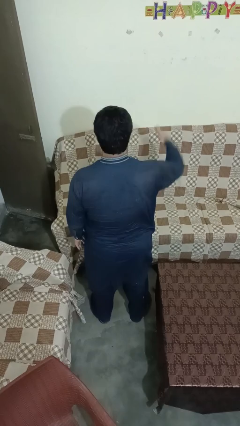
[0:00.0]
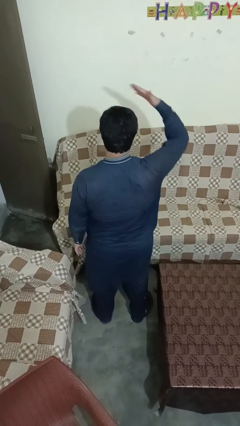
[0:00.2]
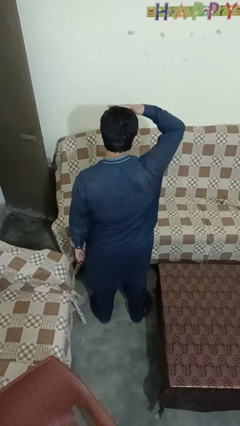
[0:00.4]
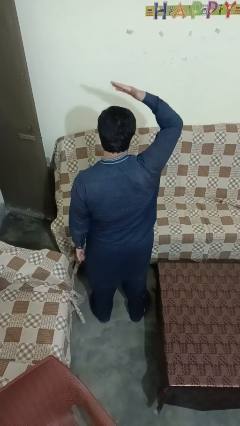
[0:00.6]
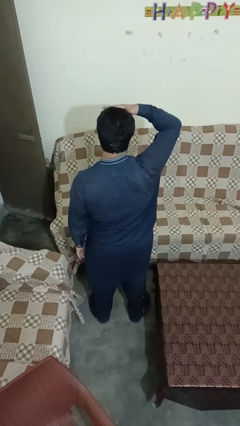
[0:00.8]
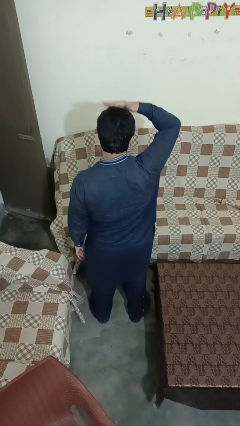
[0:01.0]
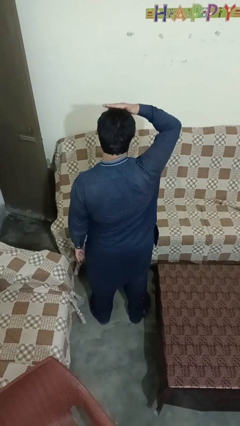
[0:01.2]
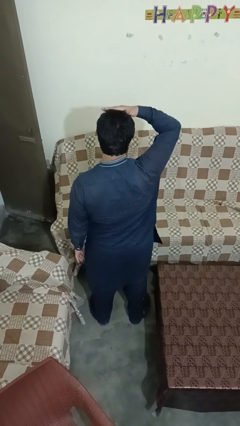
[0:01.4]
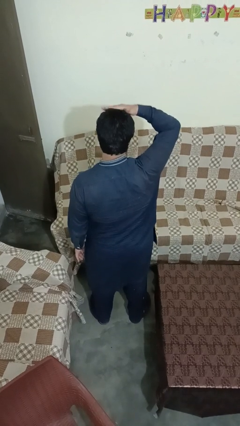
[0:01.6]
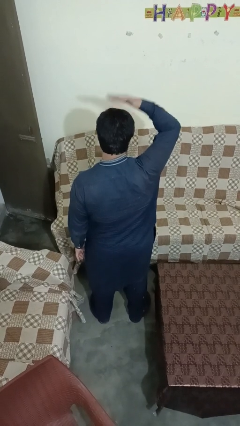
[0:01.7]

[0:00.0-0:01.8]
person pats head

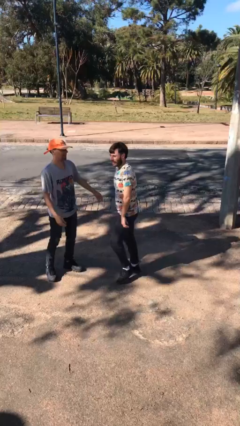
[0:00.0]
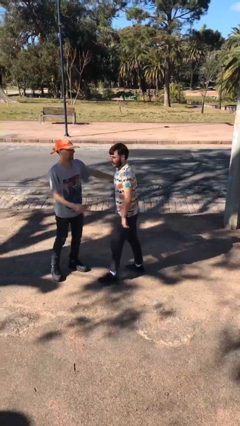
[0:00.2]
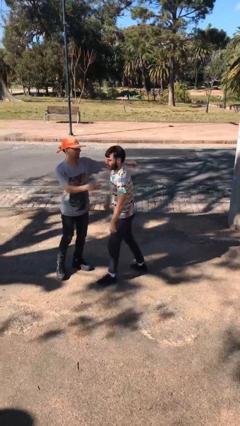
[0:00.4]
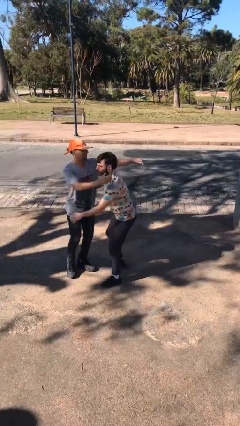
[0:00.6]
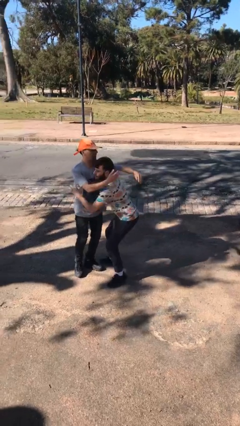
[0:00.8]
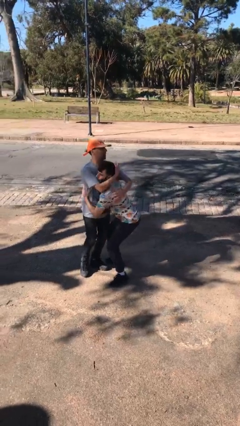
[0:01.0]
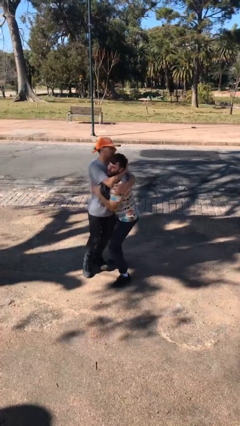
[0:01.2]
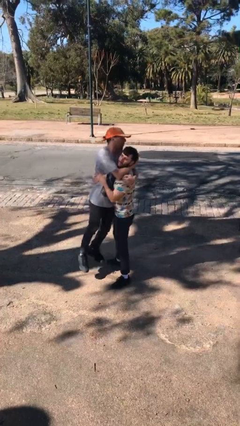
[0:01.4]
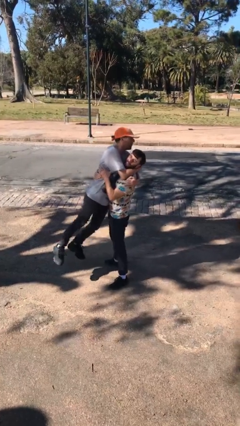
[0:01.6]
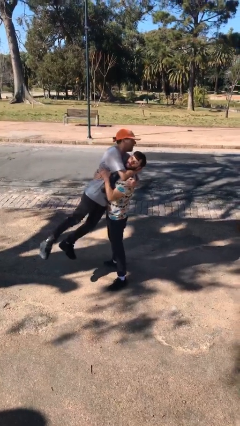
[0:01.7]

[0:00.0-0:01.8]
person picks up person

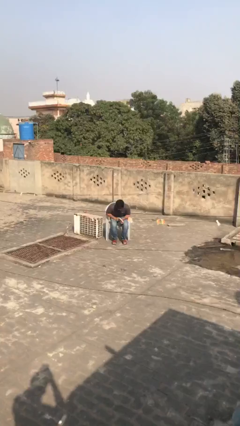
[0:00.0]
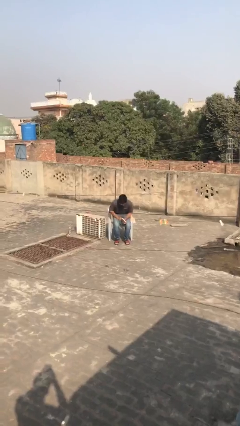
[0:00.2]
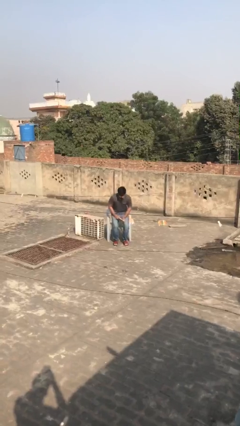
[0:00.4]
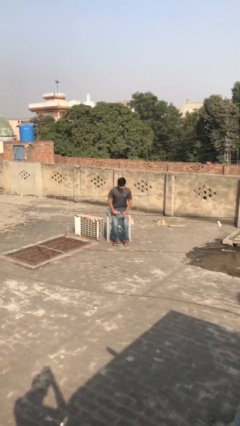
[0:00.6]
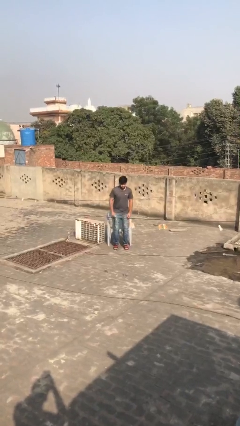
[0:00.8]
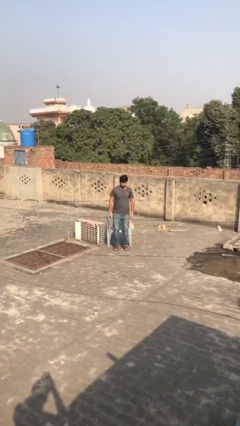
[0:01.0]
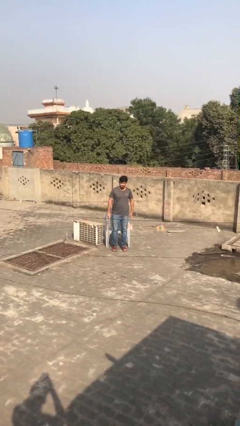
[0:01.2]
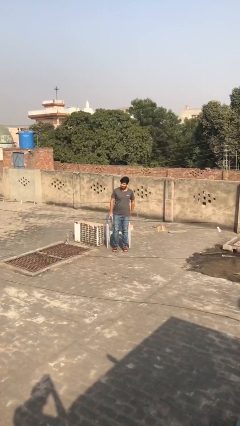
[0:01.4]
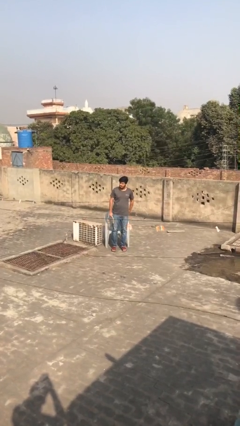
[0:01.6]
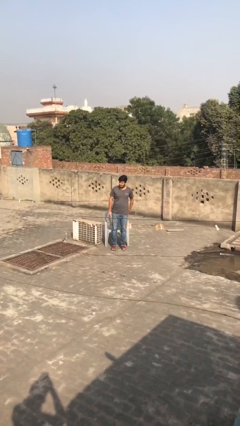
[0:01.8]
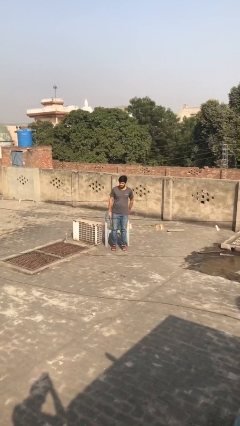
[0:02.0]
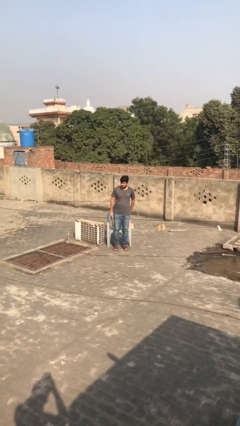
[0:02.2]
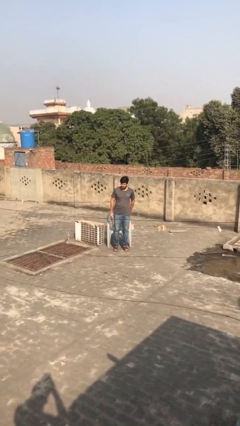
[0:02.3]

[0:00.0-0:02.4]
person stands up

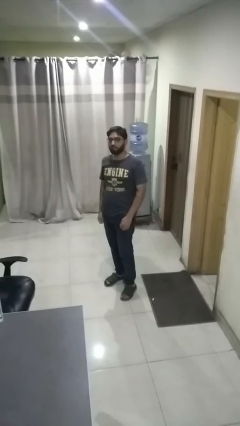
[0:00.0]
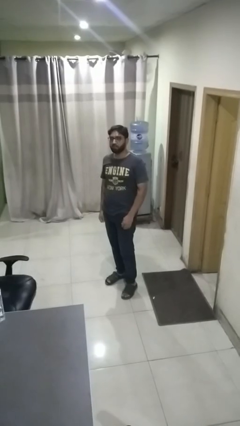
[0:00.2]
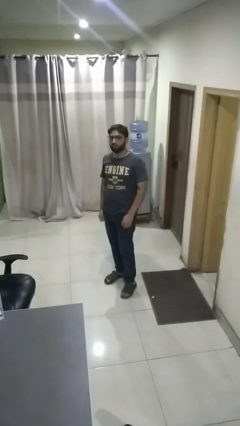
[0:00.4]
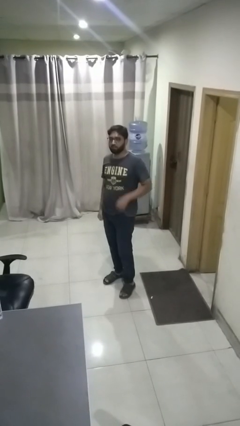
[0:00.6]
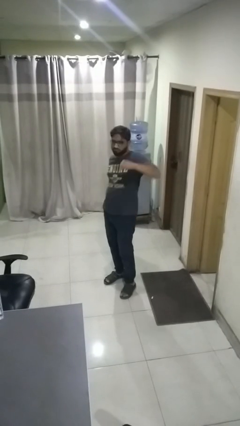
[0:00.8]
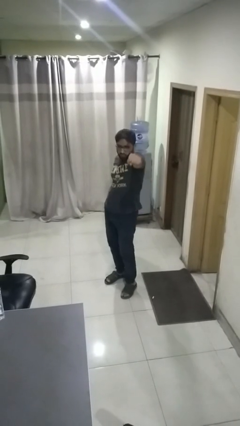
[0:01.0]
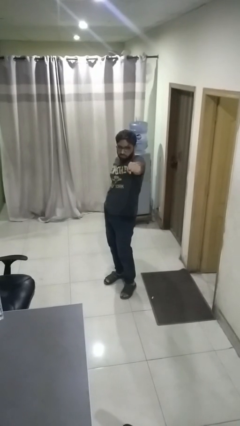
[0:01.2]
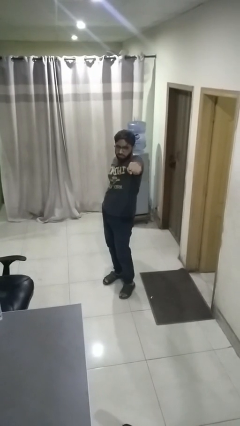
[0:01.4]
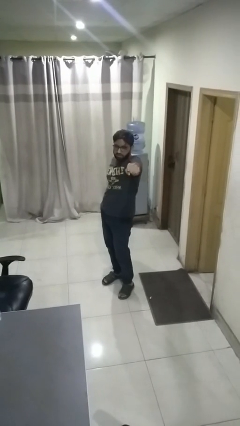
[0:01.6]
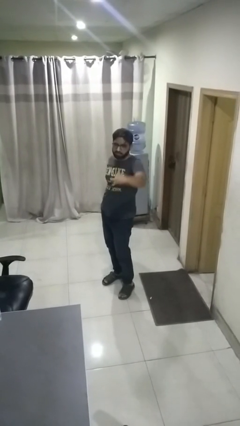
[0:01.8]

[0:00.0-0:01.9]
person punches

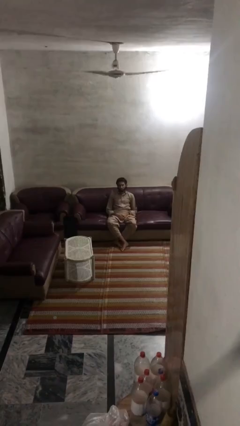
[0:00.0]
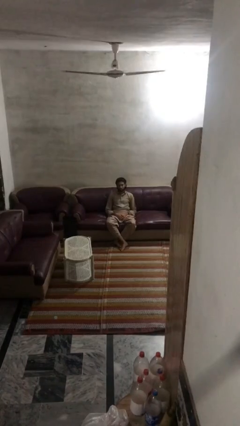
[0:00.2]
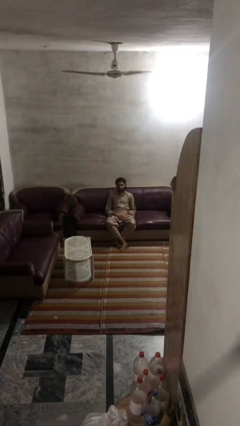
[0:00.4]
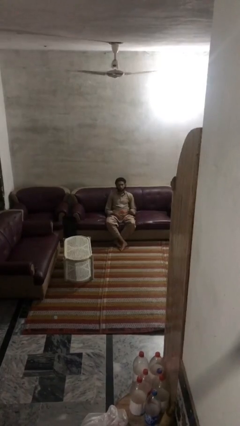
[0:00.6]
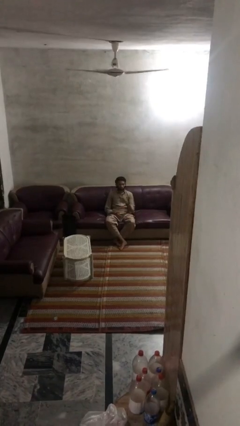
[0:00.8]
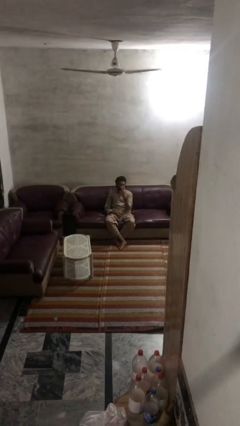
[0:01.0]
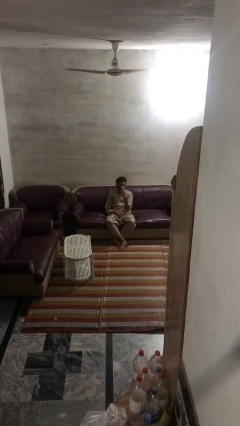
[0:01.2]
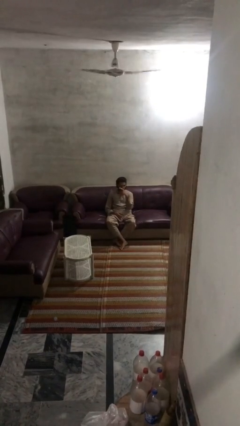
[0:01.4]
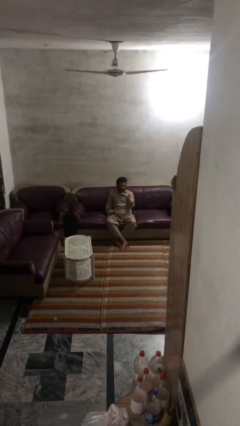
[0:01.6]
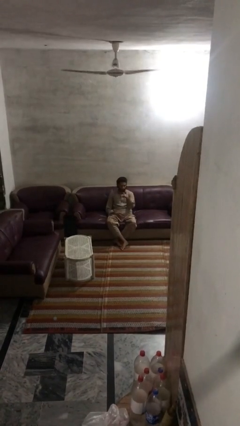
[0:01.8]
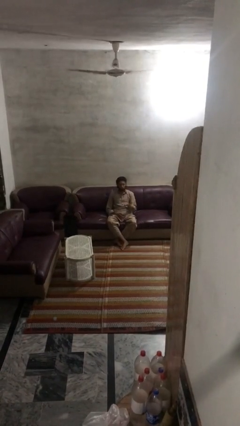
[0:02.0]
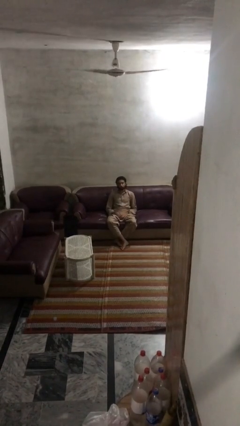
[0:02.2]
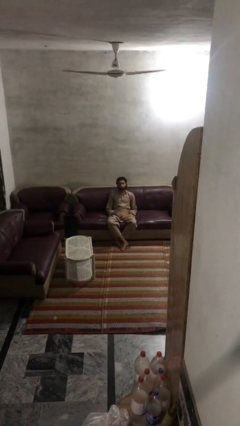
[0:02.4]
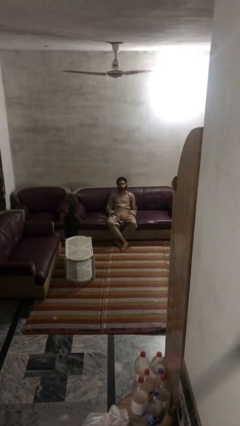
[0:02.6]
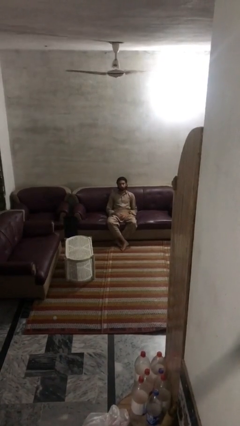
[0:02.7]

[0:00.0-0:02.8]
person gestures watch closely

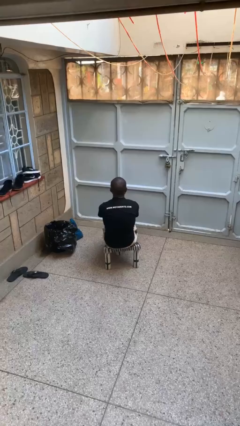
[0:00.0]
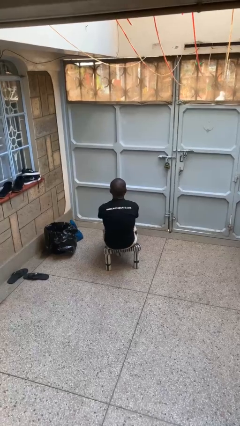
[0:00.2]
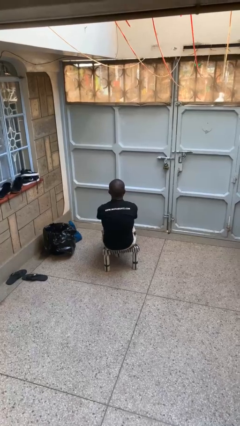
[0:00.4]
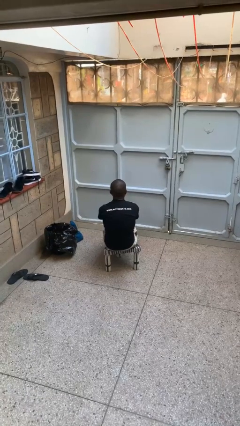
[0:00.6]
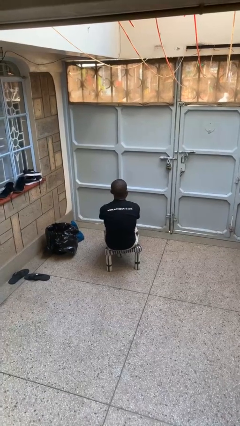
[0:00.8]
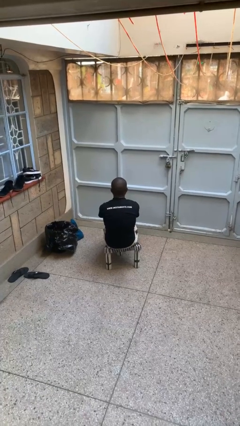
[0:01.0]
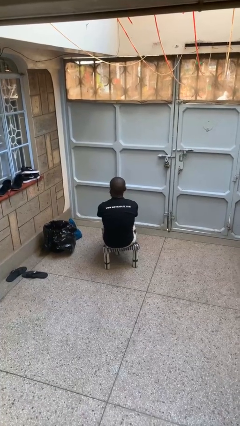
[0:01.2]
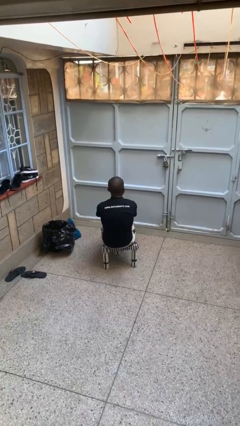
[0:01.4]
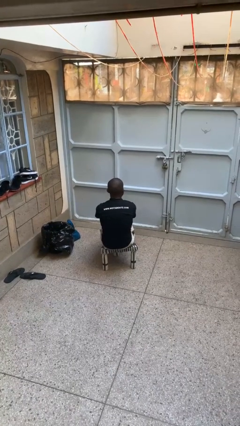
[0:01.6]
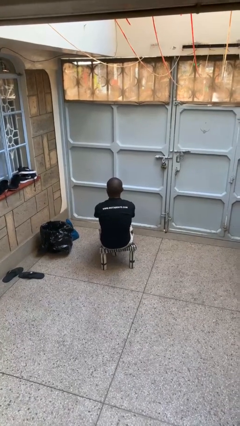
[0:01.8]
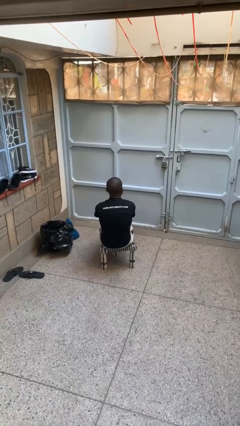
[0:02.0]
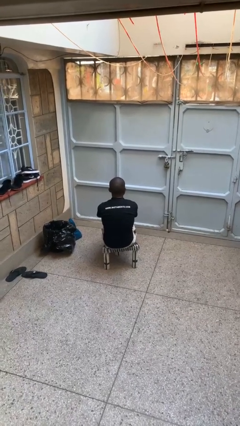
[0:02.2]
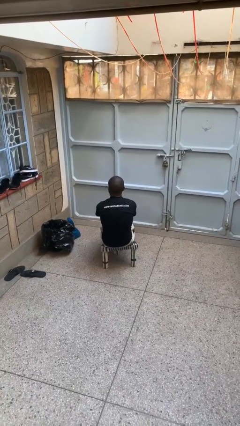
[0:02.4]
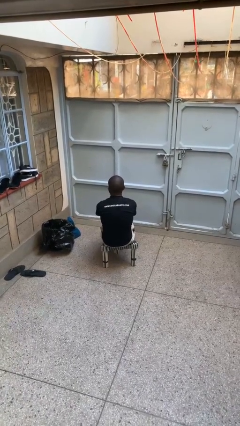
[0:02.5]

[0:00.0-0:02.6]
person shakes head

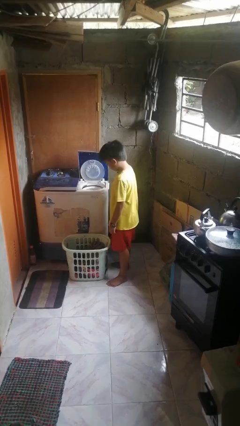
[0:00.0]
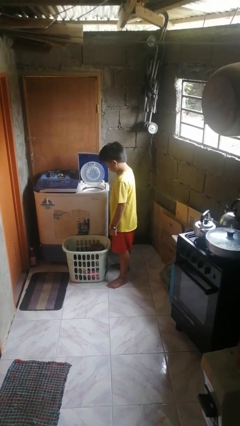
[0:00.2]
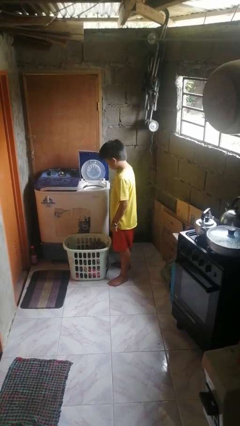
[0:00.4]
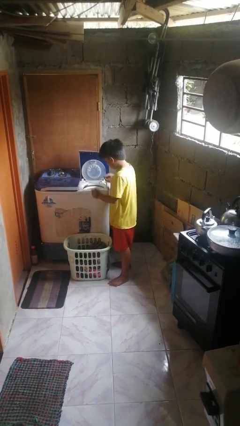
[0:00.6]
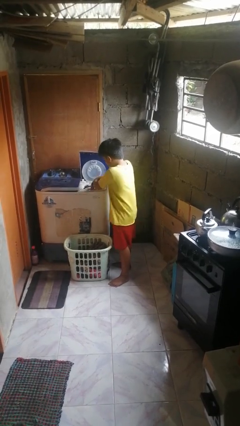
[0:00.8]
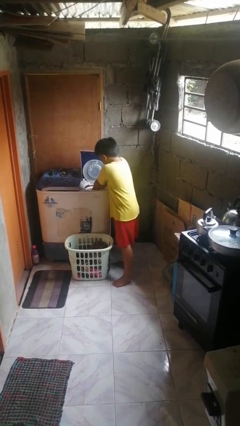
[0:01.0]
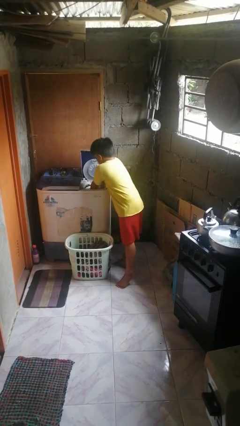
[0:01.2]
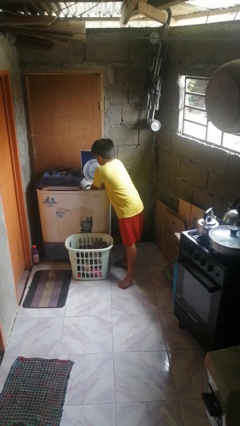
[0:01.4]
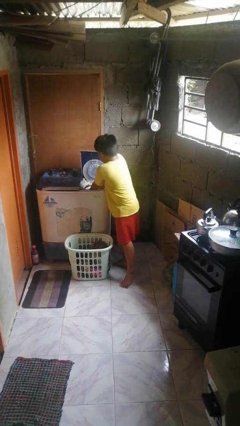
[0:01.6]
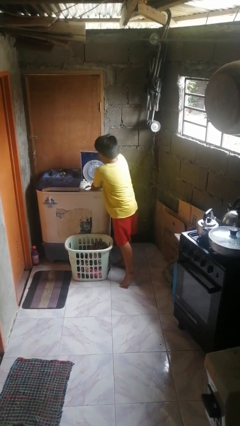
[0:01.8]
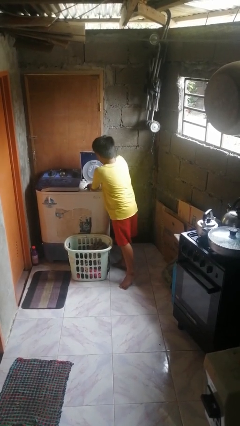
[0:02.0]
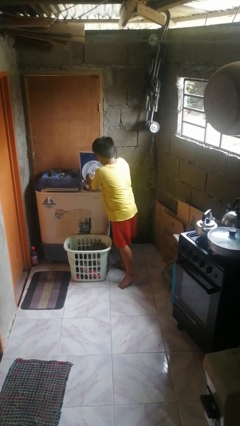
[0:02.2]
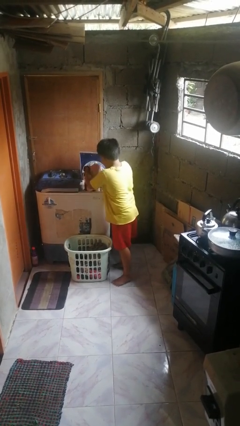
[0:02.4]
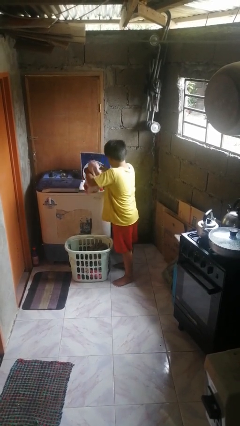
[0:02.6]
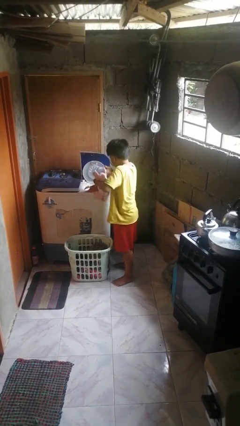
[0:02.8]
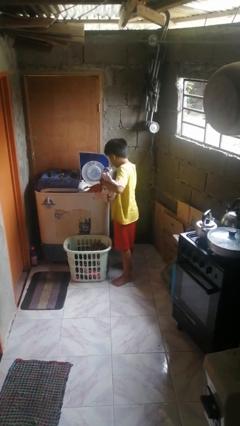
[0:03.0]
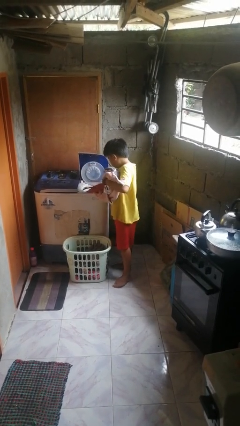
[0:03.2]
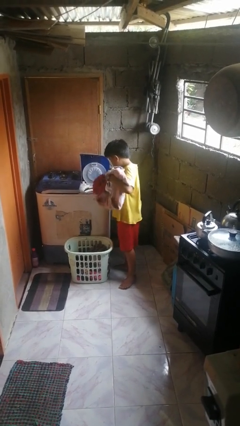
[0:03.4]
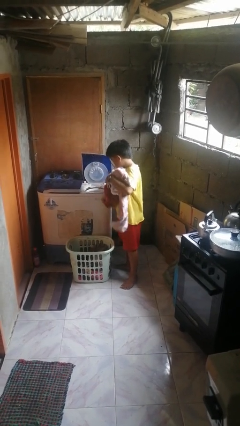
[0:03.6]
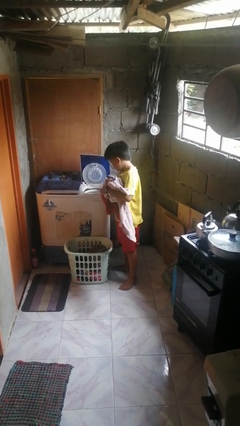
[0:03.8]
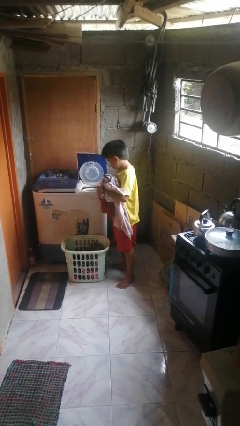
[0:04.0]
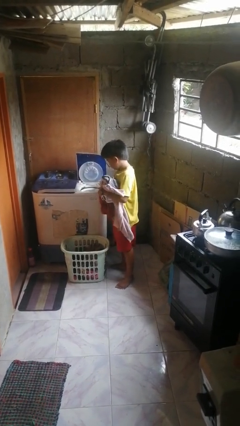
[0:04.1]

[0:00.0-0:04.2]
person unloads dryer
